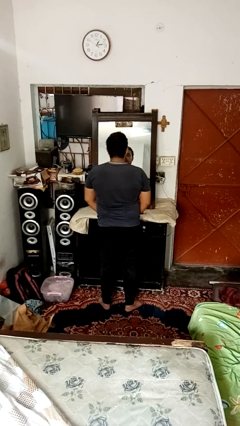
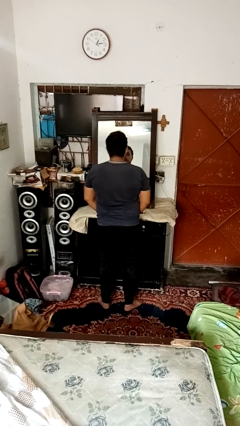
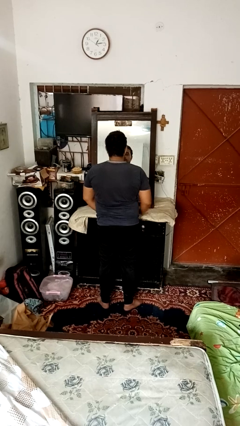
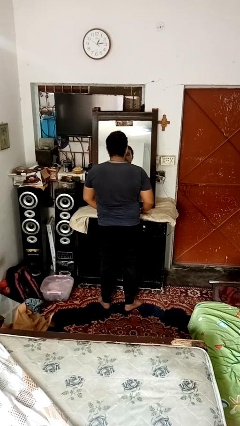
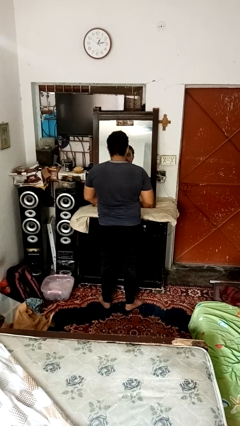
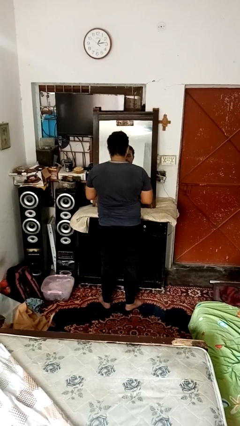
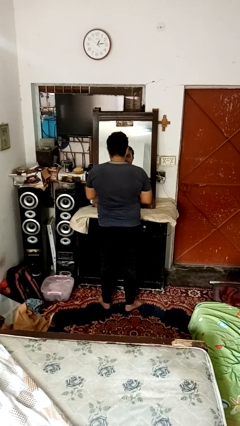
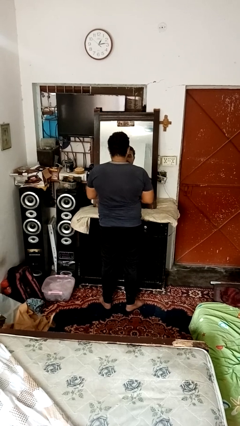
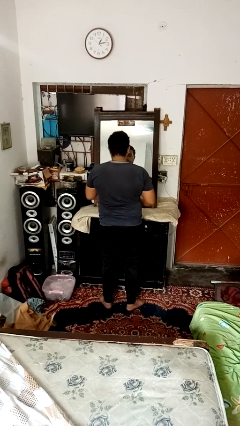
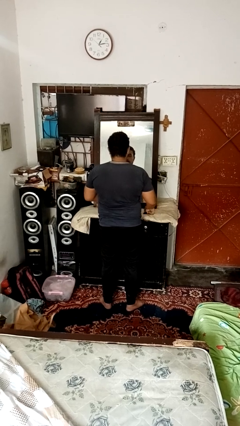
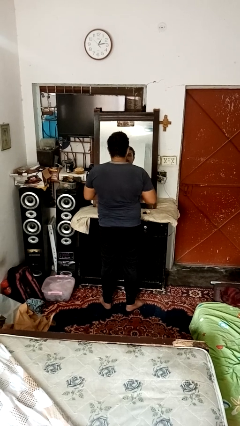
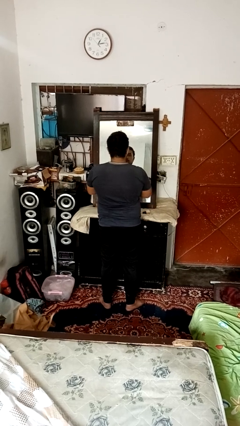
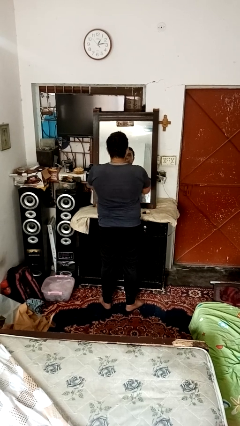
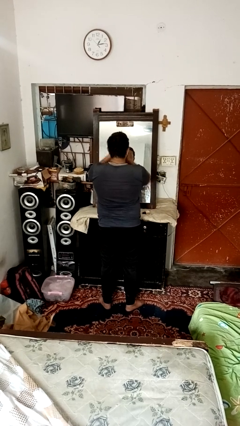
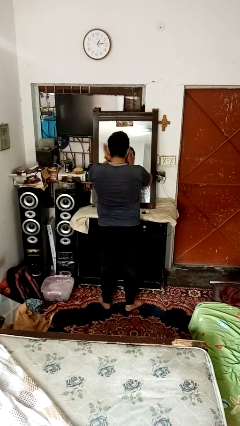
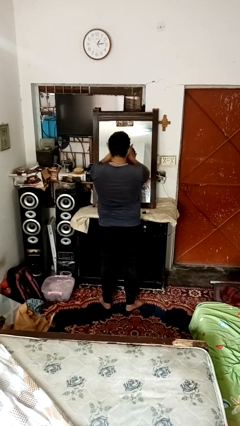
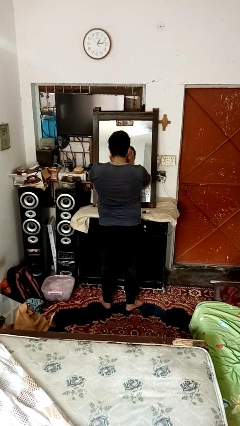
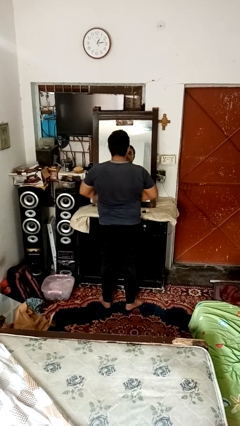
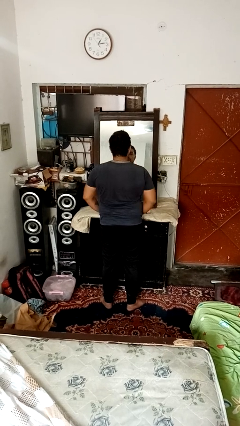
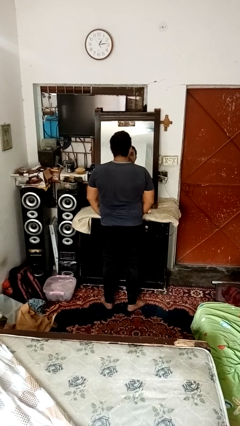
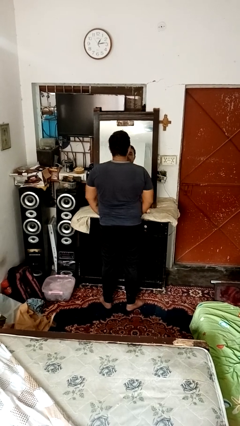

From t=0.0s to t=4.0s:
person applies foundation makeup

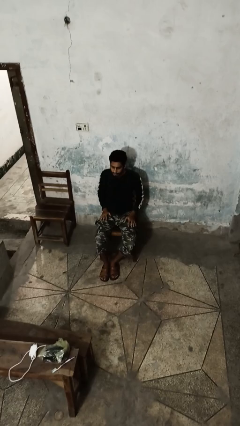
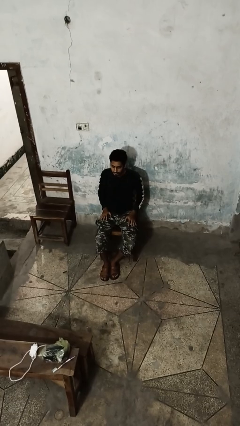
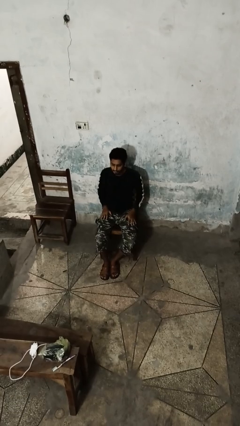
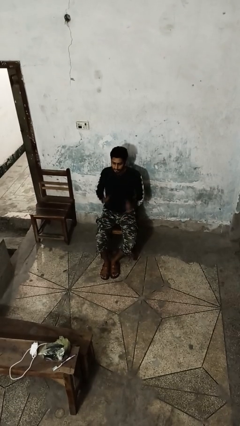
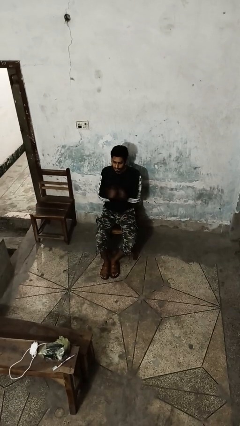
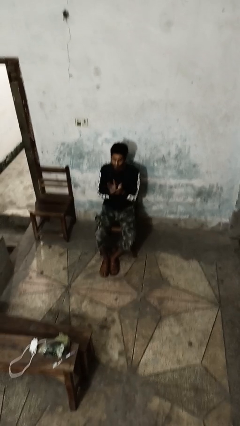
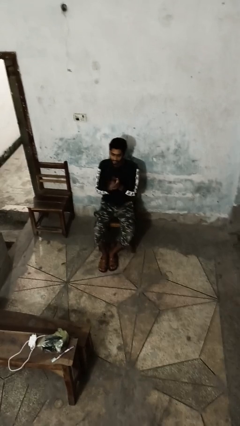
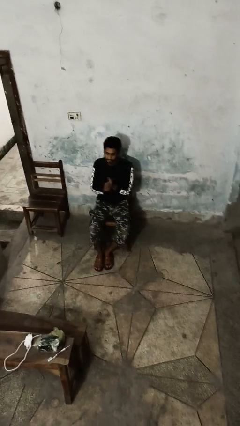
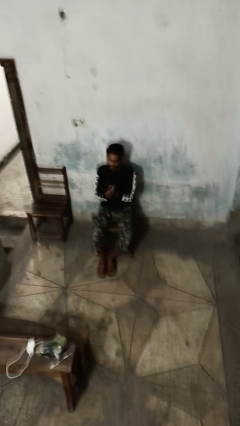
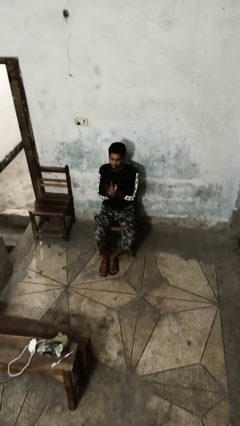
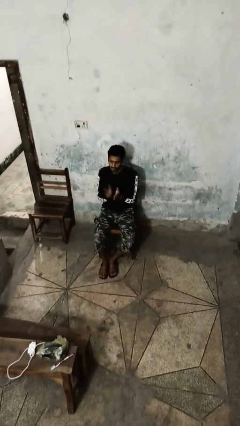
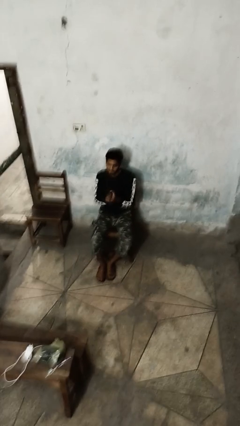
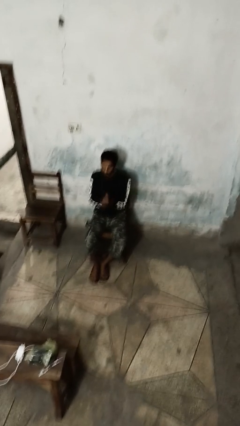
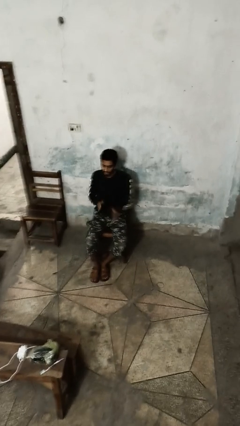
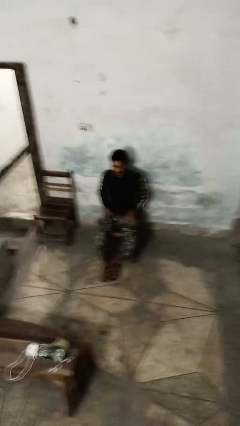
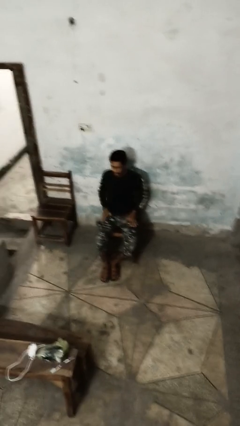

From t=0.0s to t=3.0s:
person claps hands

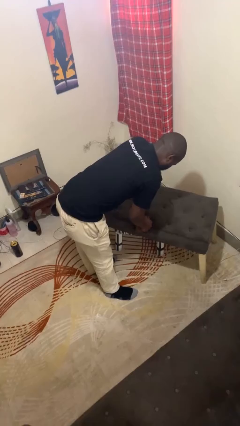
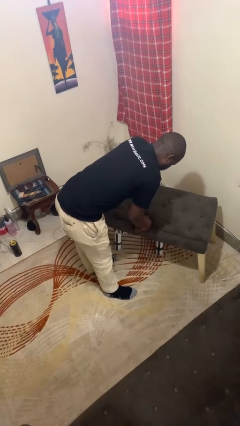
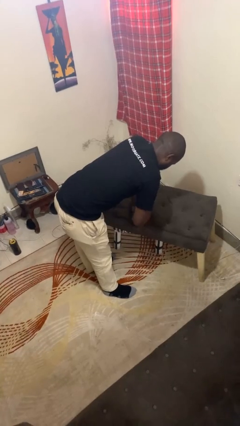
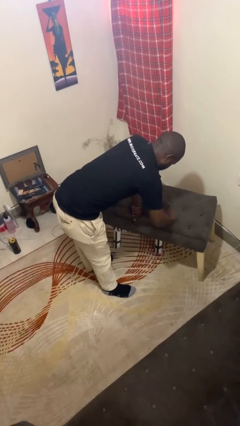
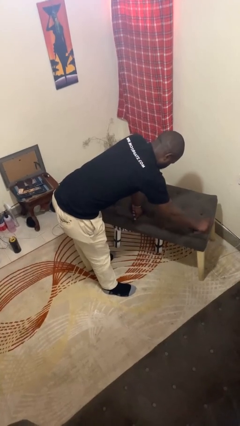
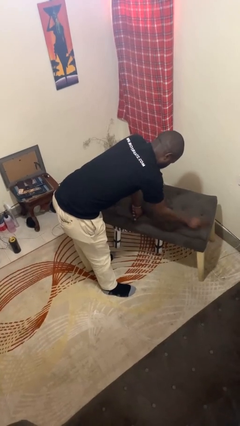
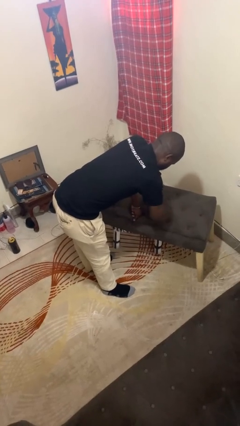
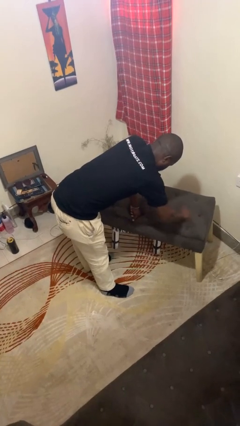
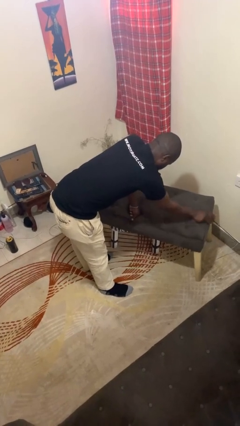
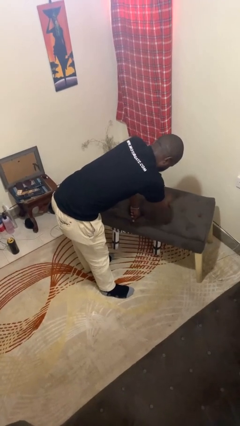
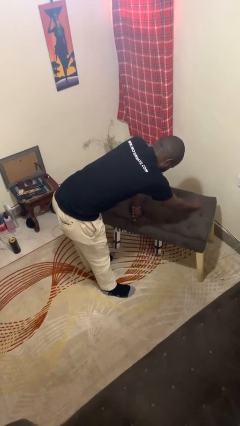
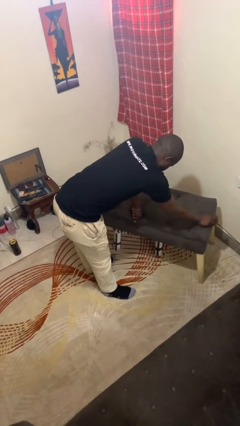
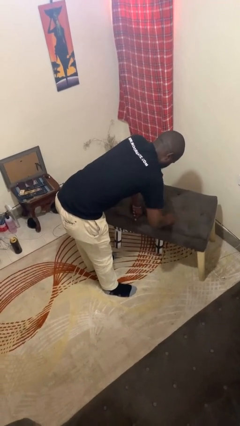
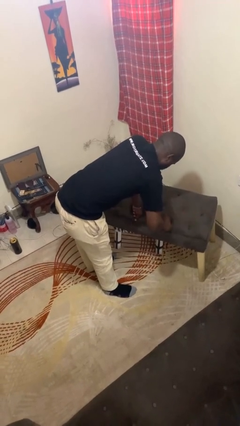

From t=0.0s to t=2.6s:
person cleans table with rag

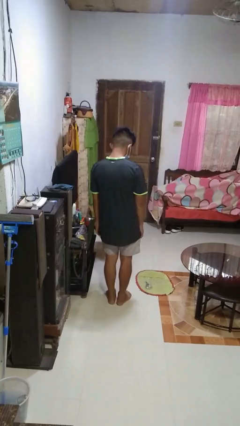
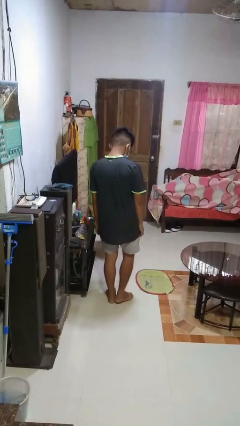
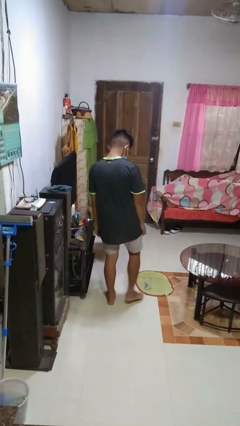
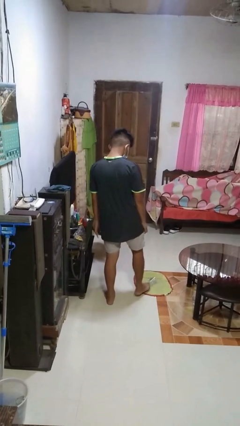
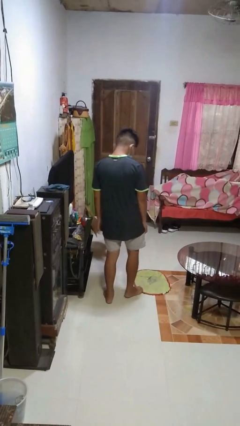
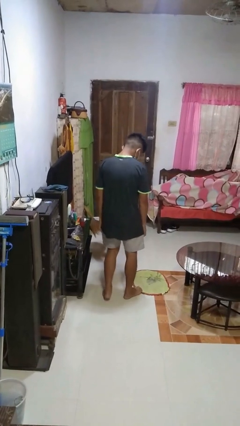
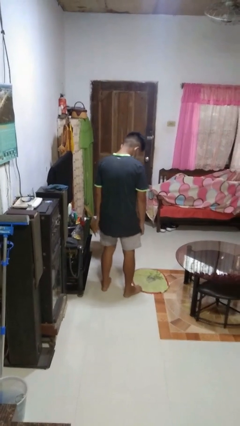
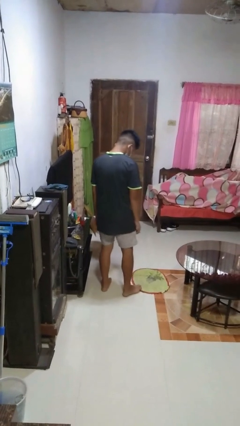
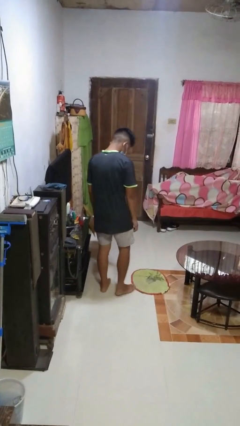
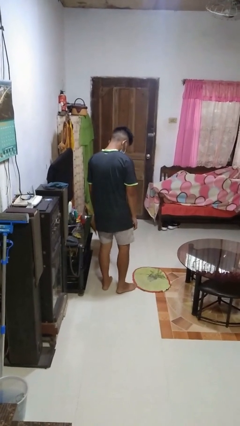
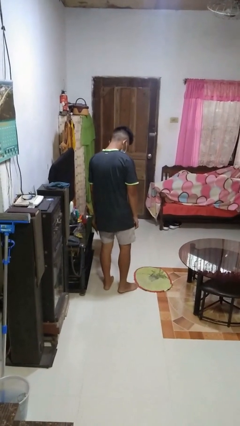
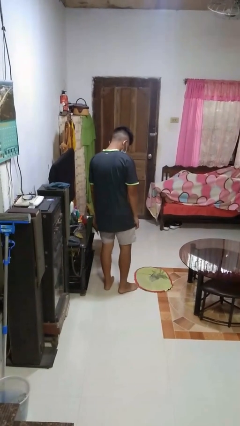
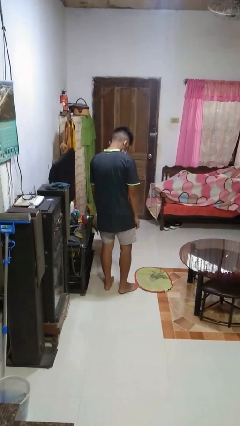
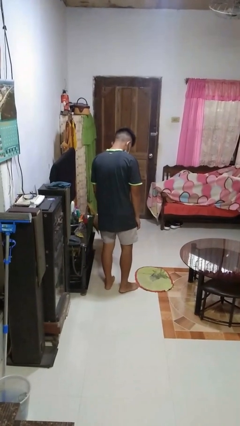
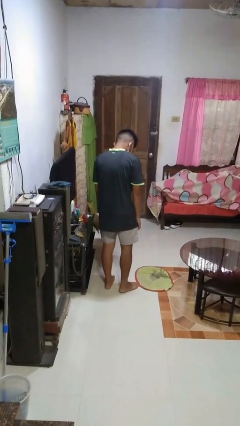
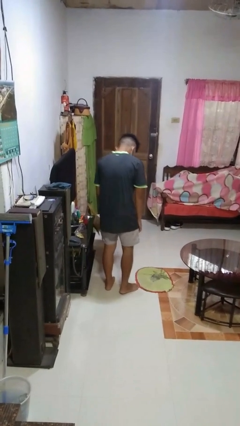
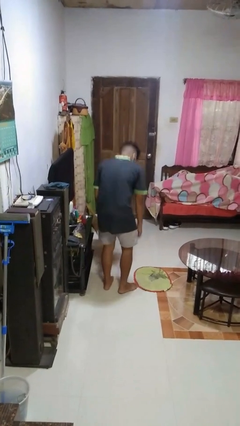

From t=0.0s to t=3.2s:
person spills on floor

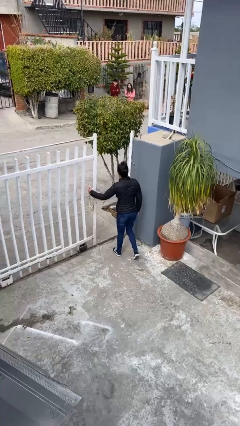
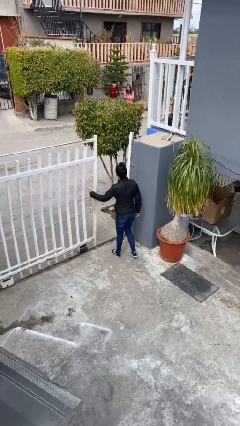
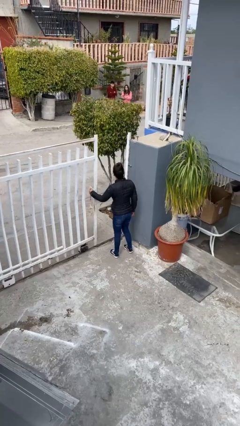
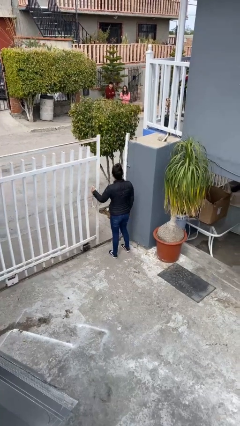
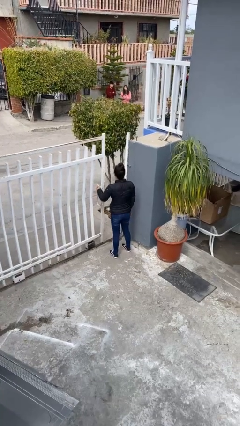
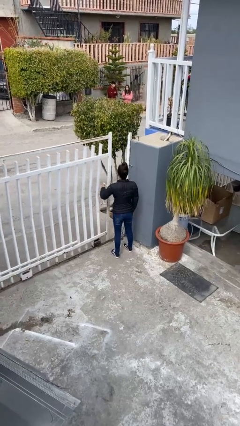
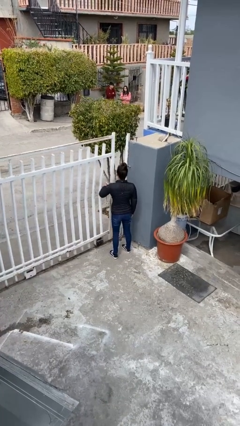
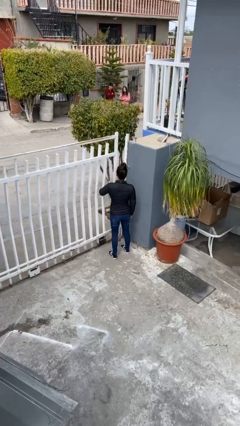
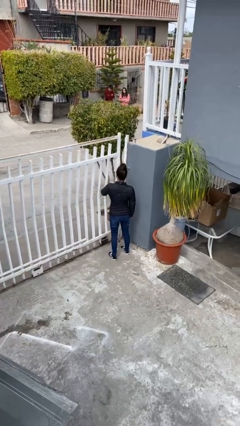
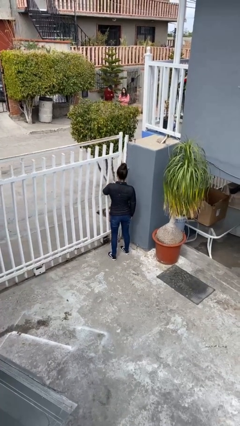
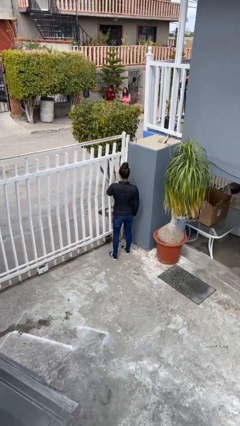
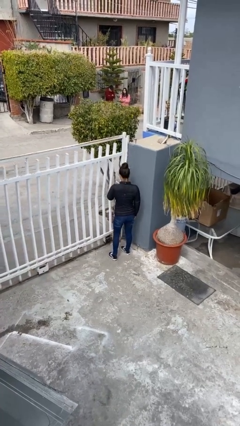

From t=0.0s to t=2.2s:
person closes facility door

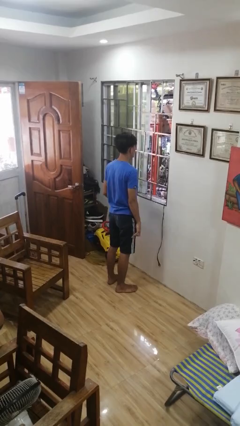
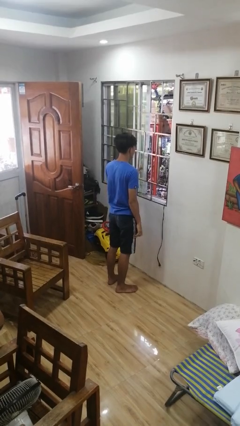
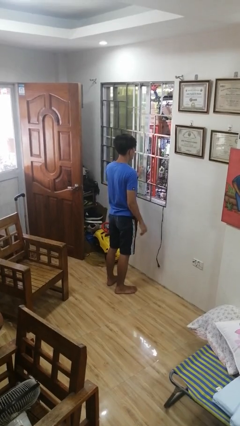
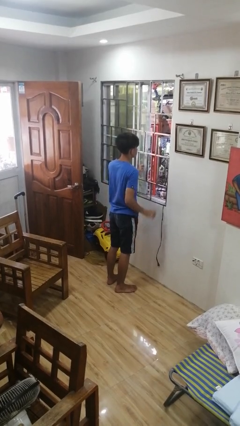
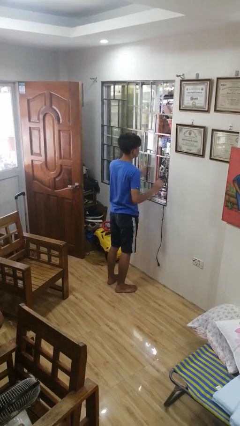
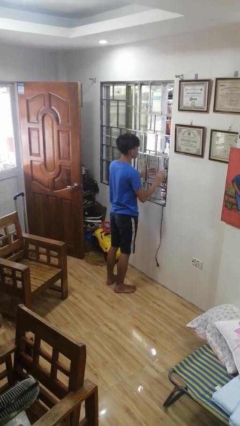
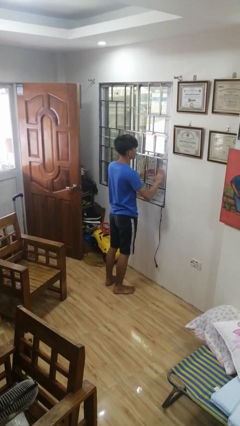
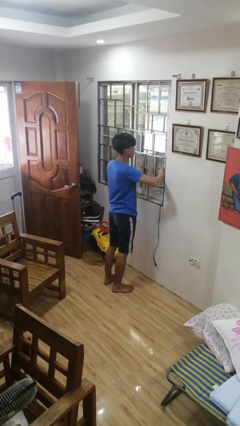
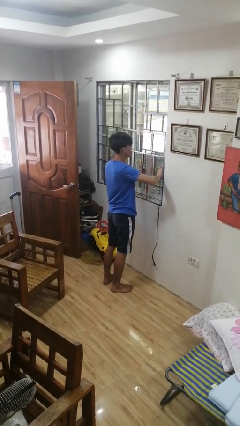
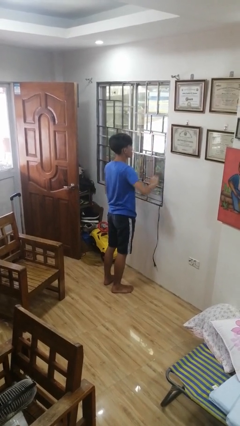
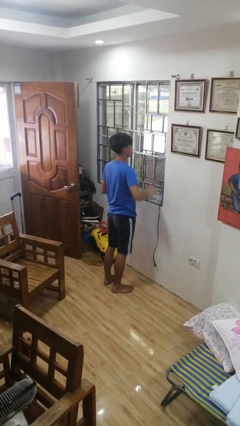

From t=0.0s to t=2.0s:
person closes home window

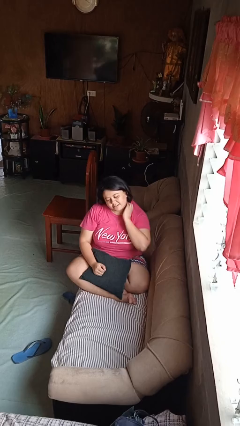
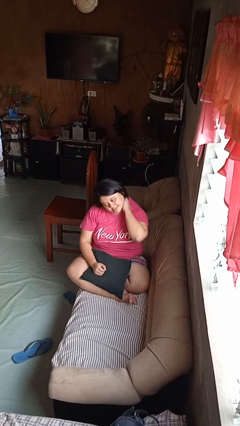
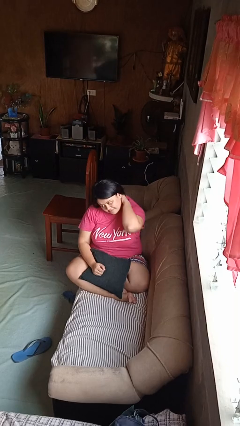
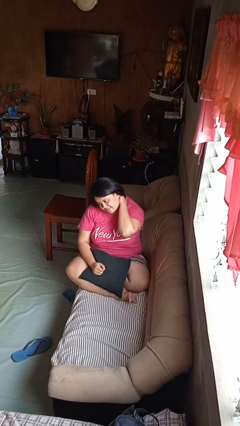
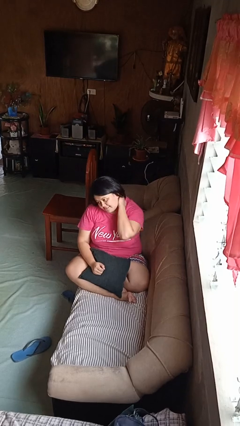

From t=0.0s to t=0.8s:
person rubs neck
